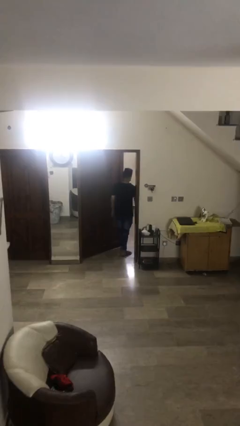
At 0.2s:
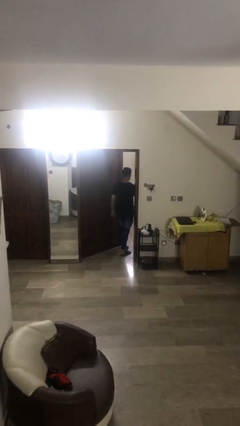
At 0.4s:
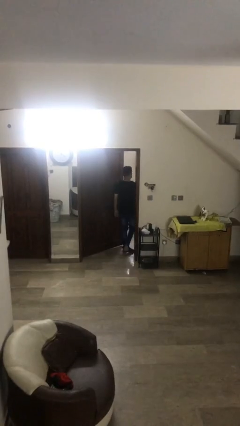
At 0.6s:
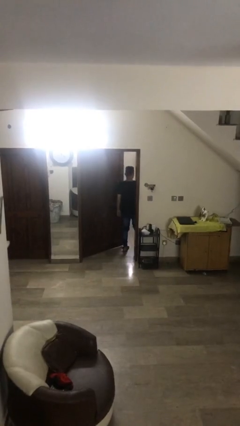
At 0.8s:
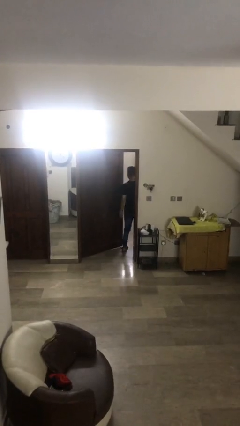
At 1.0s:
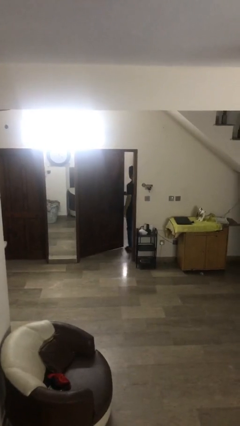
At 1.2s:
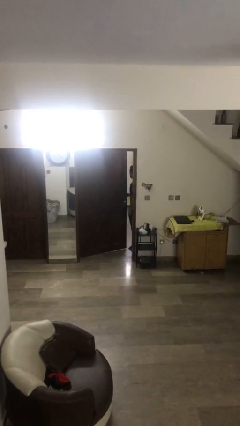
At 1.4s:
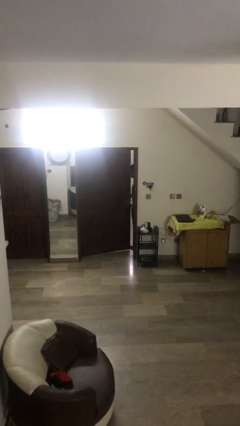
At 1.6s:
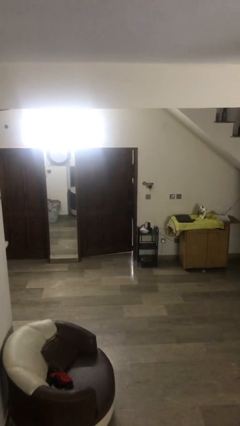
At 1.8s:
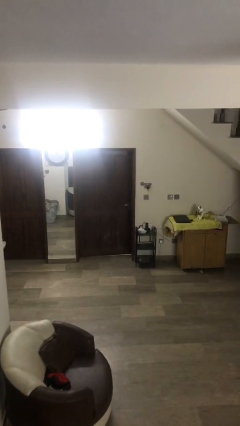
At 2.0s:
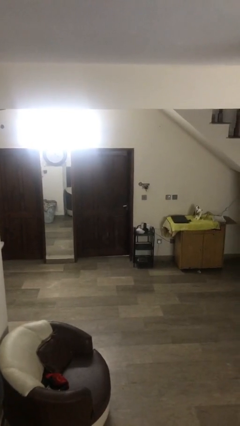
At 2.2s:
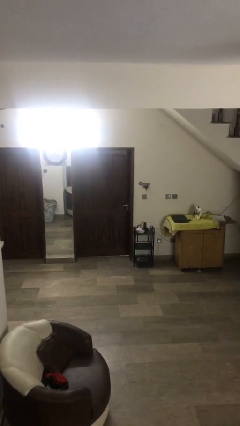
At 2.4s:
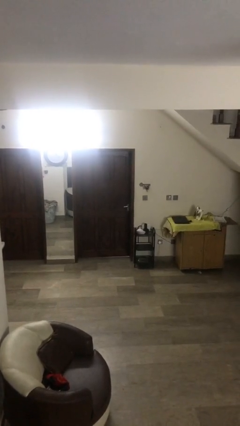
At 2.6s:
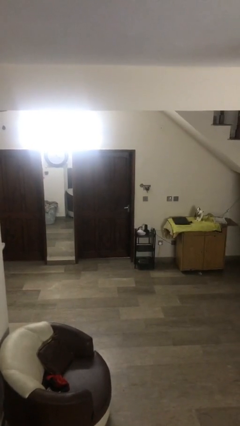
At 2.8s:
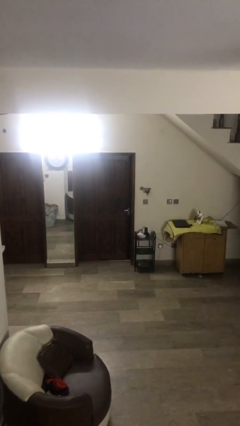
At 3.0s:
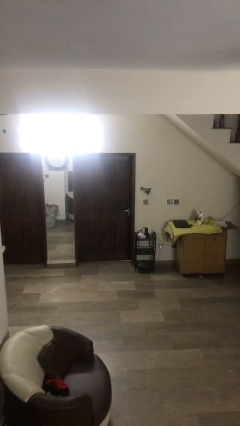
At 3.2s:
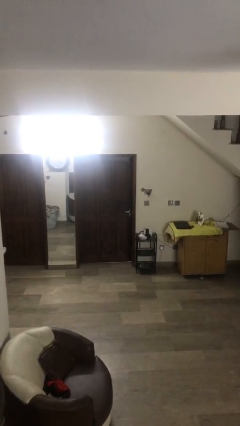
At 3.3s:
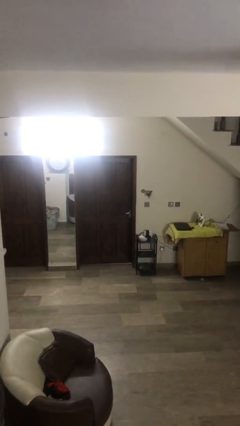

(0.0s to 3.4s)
person closes facility door

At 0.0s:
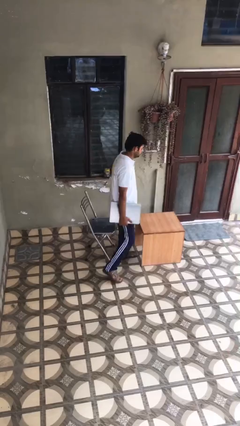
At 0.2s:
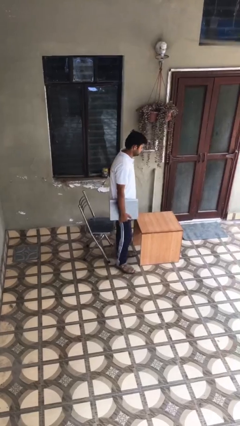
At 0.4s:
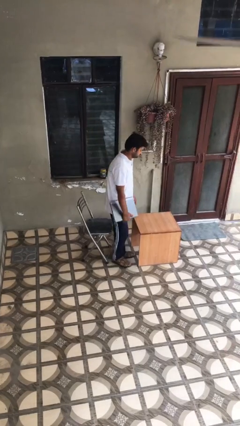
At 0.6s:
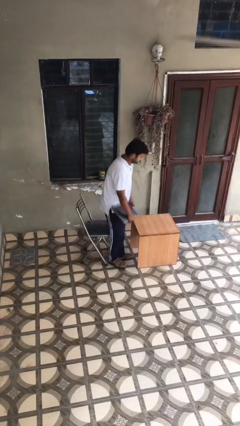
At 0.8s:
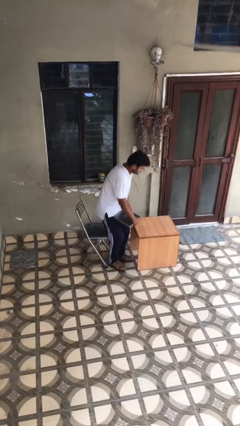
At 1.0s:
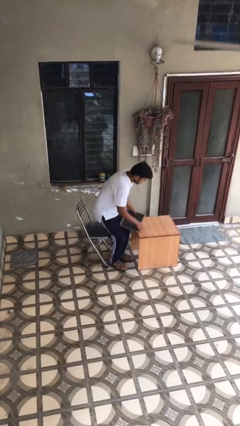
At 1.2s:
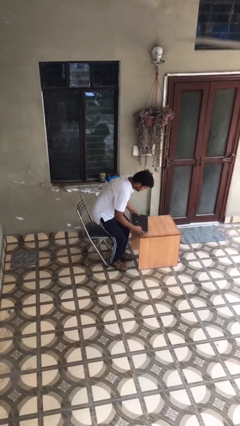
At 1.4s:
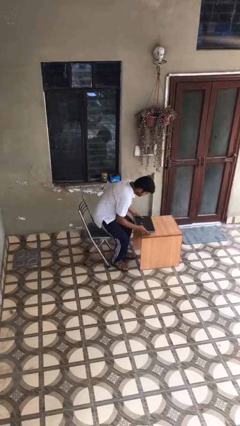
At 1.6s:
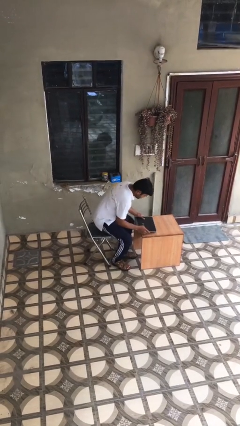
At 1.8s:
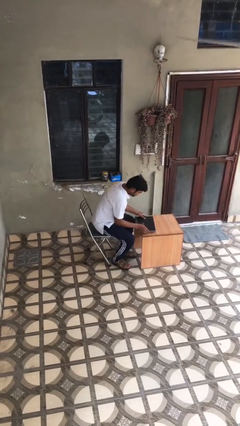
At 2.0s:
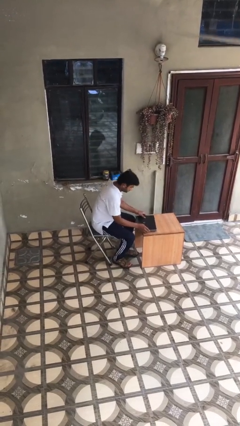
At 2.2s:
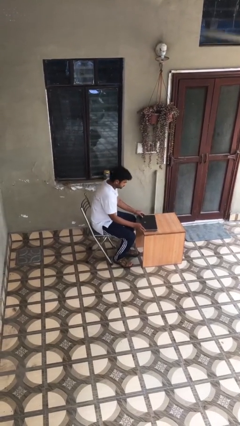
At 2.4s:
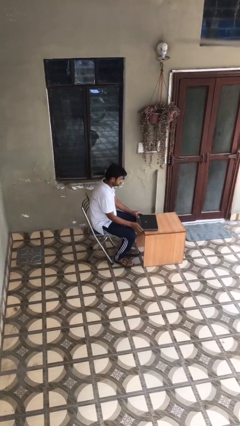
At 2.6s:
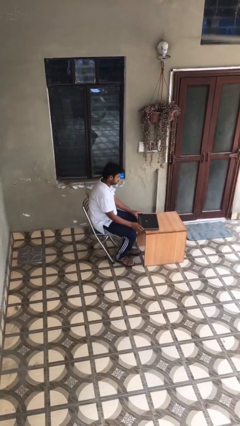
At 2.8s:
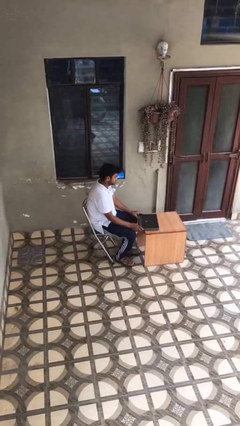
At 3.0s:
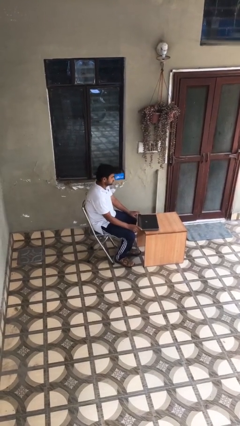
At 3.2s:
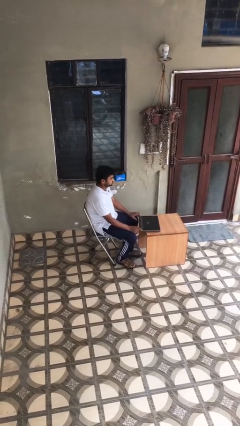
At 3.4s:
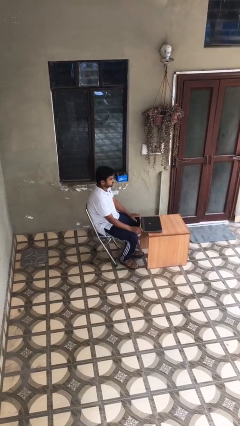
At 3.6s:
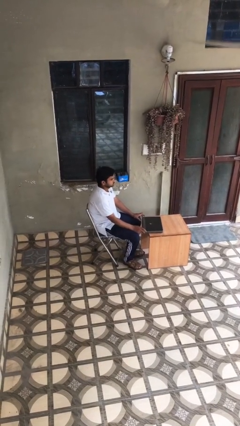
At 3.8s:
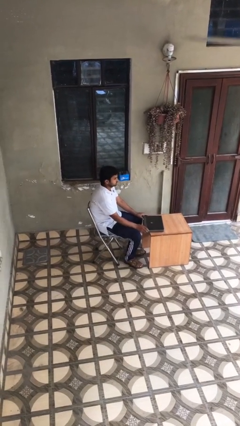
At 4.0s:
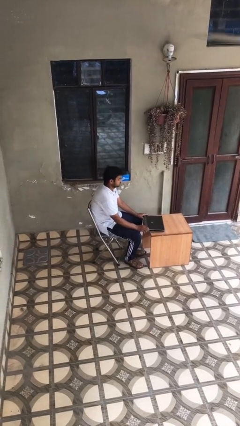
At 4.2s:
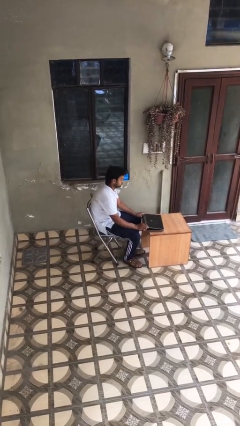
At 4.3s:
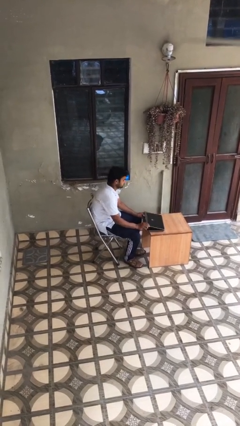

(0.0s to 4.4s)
person sits down

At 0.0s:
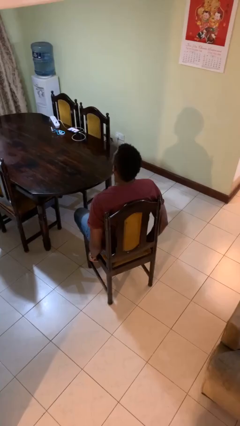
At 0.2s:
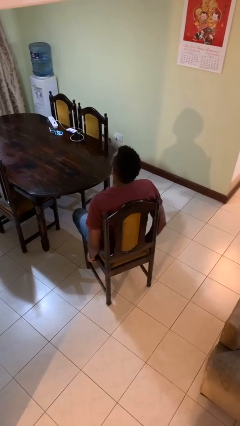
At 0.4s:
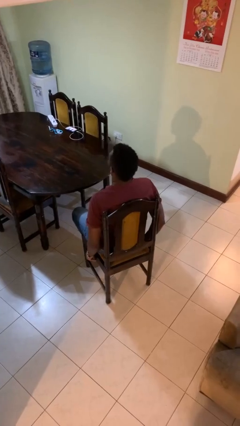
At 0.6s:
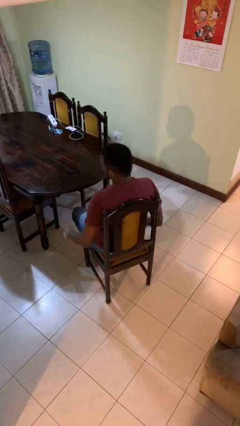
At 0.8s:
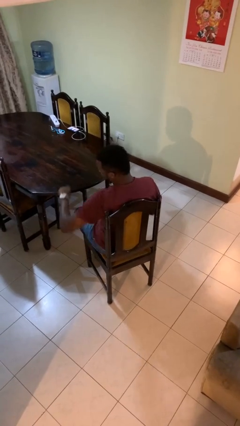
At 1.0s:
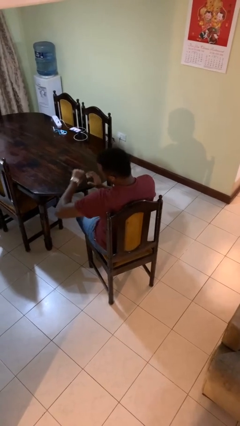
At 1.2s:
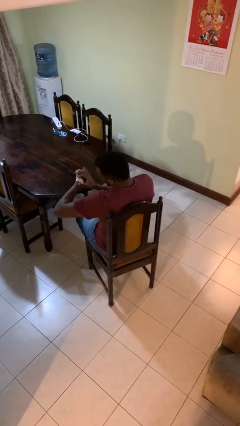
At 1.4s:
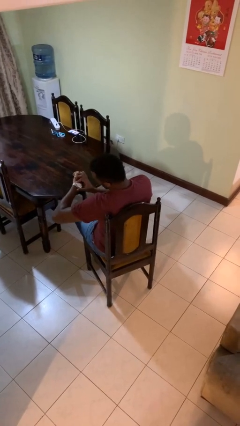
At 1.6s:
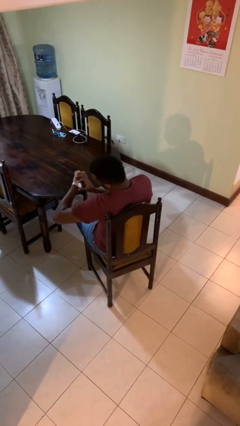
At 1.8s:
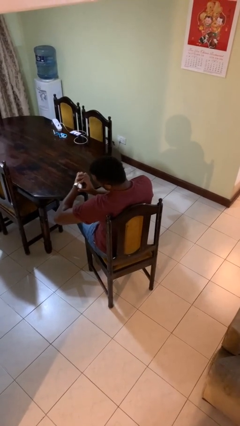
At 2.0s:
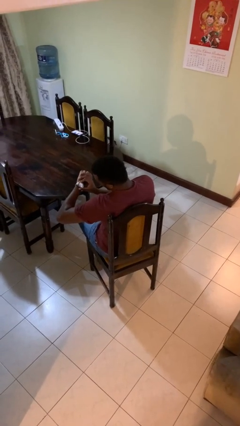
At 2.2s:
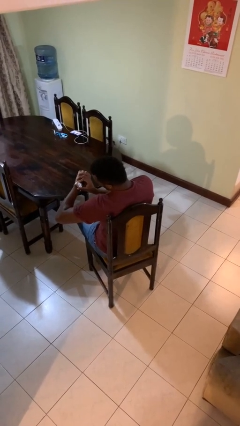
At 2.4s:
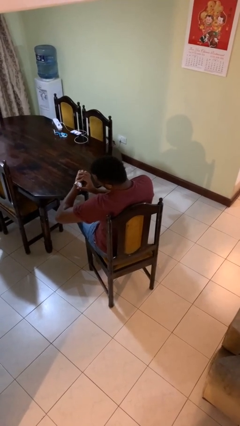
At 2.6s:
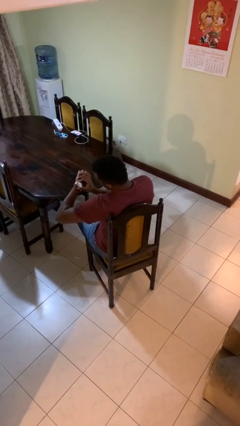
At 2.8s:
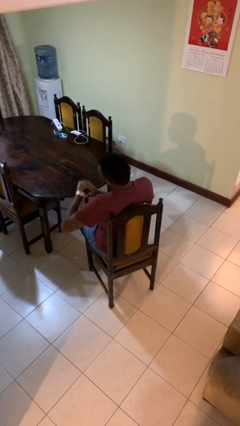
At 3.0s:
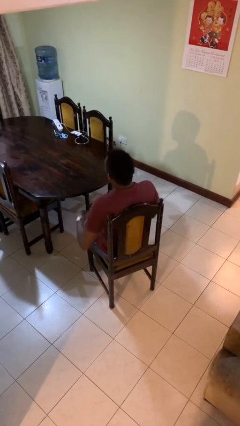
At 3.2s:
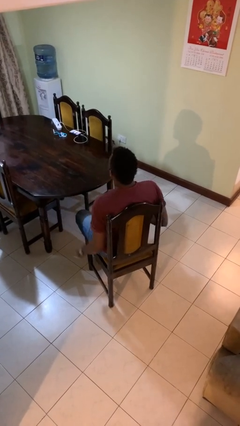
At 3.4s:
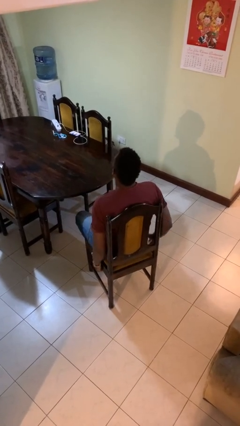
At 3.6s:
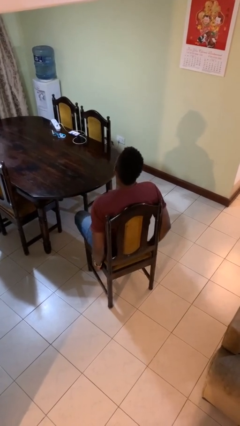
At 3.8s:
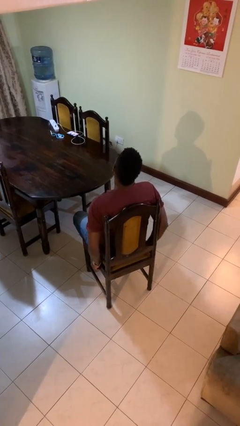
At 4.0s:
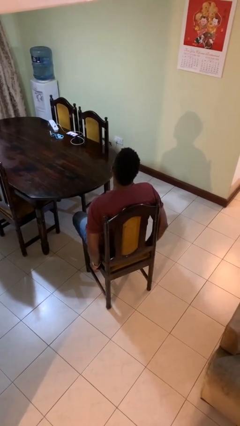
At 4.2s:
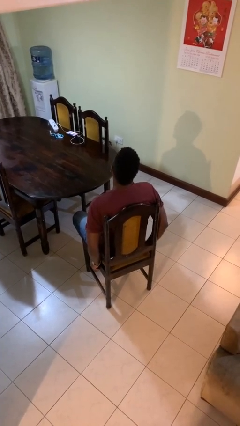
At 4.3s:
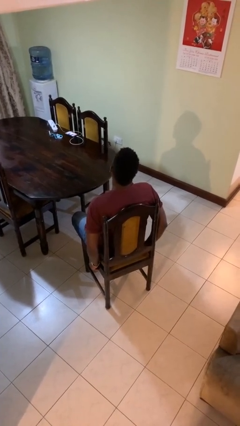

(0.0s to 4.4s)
person looks at wristwatch

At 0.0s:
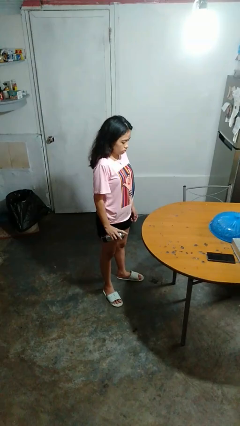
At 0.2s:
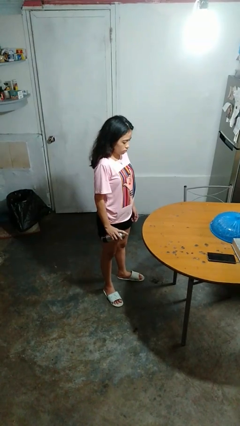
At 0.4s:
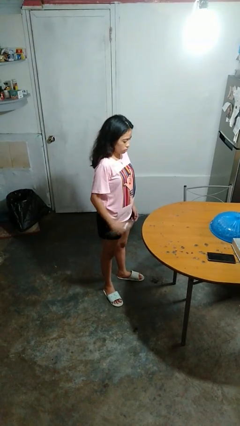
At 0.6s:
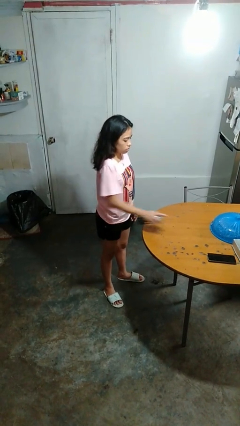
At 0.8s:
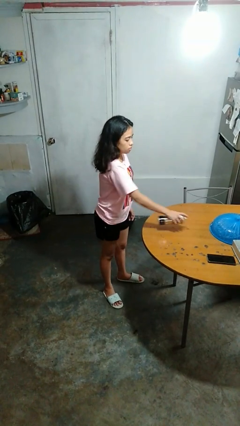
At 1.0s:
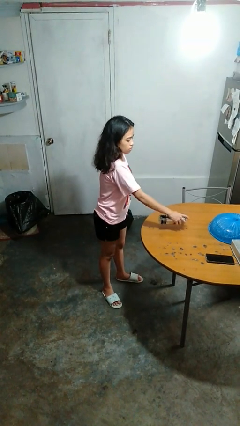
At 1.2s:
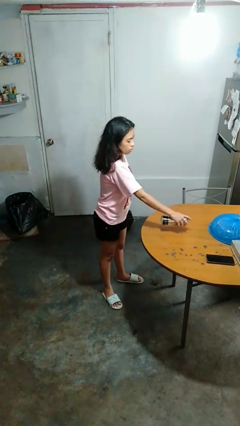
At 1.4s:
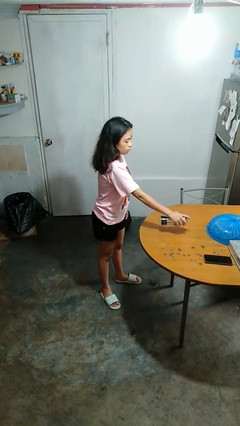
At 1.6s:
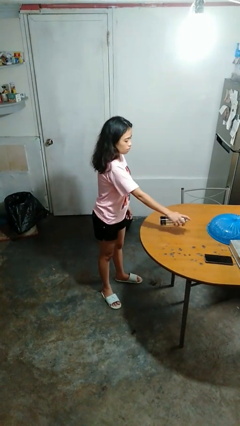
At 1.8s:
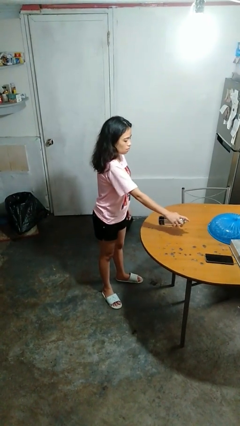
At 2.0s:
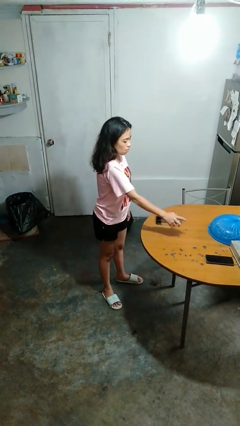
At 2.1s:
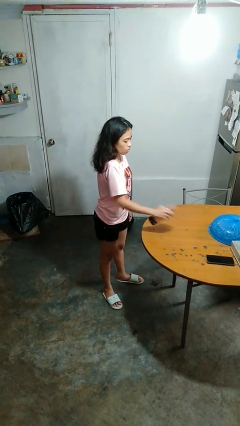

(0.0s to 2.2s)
person sprays from bottle

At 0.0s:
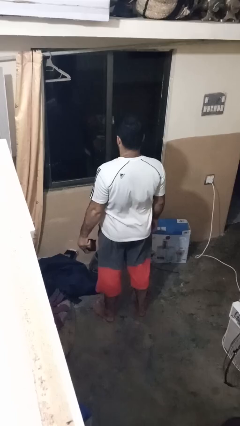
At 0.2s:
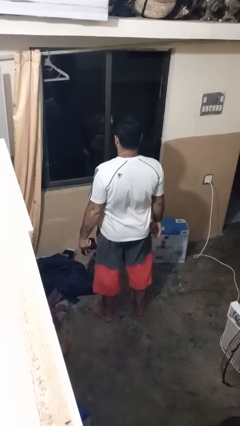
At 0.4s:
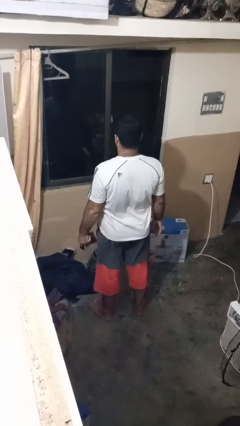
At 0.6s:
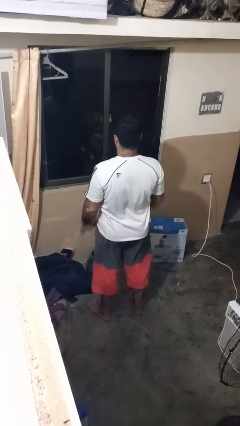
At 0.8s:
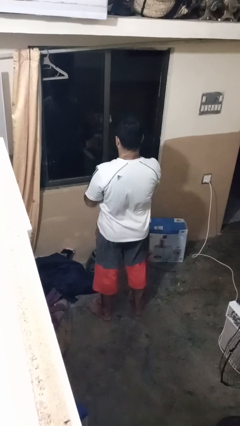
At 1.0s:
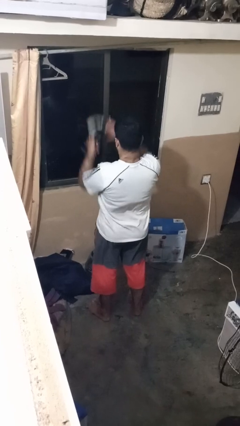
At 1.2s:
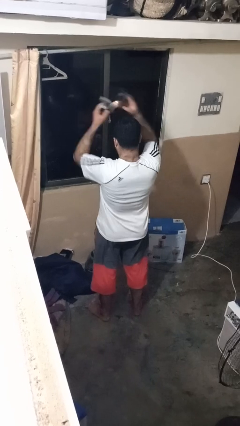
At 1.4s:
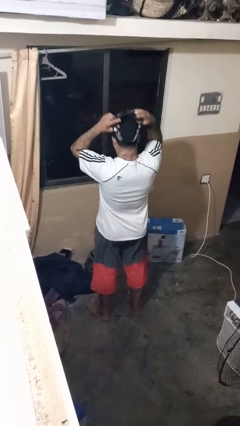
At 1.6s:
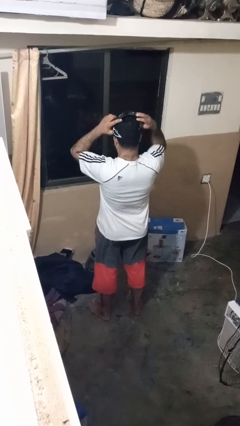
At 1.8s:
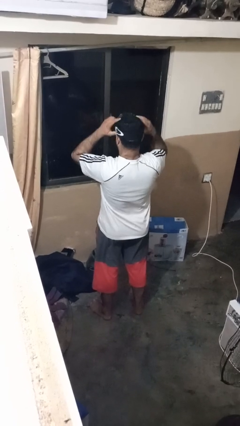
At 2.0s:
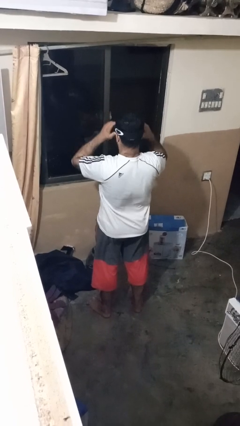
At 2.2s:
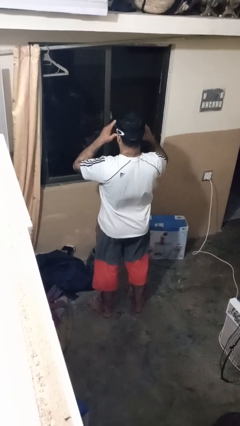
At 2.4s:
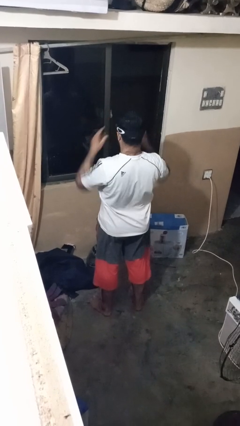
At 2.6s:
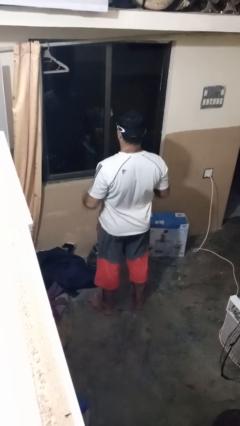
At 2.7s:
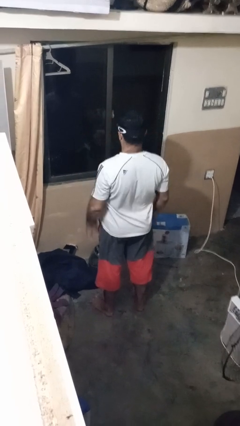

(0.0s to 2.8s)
person puts on sunglasses
